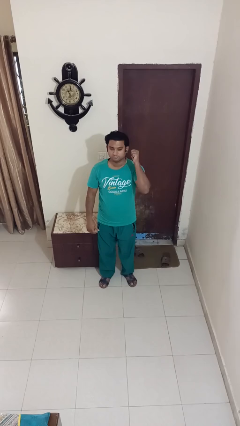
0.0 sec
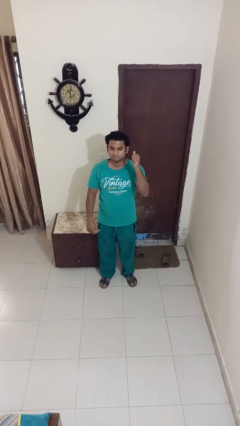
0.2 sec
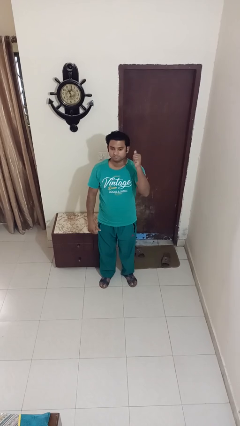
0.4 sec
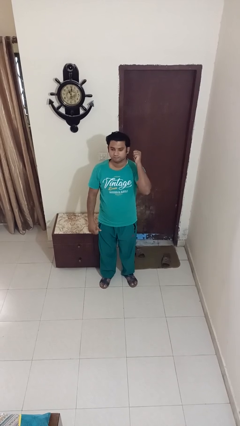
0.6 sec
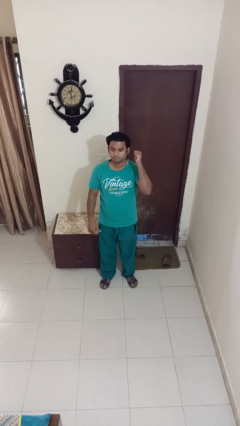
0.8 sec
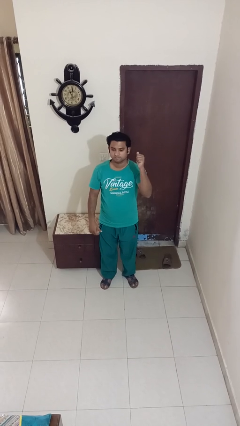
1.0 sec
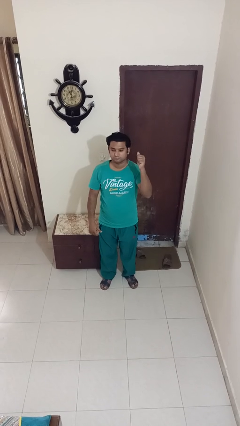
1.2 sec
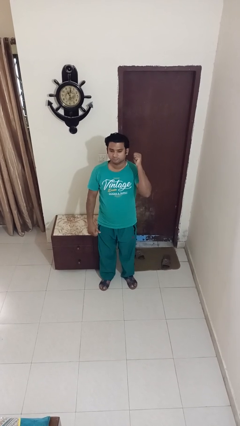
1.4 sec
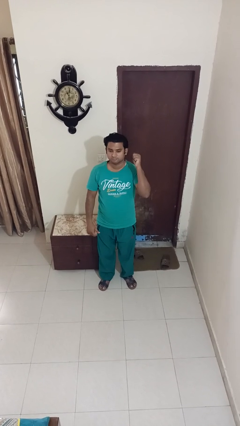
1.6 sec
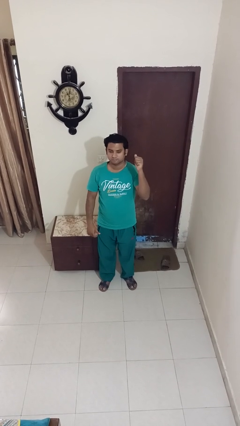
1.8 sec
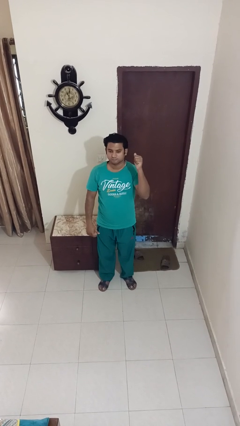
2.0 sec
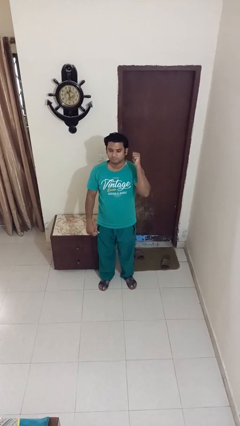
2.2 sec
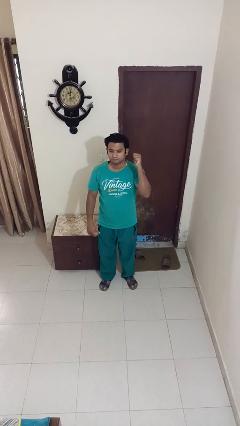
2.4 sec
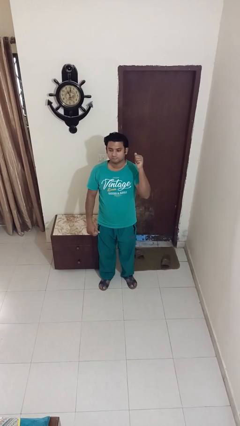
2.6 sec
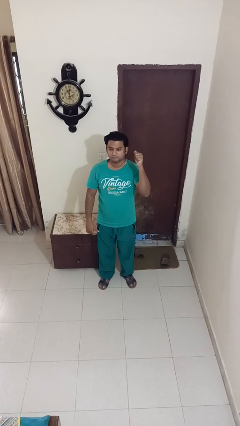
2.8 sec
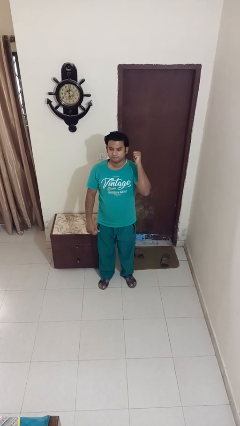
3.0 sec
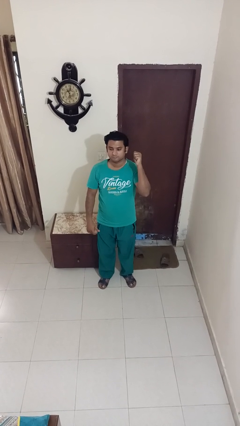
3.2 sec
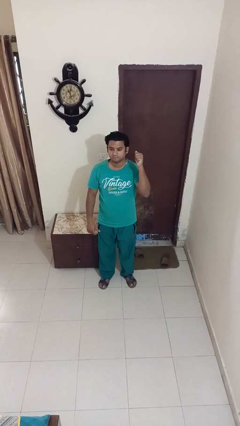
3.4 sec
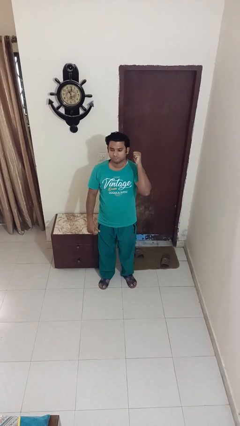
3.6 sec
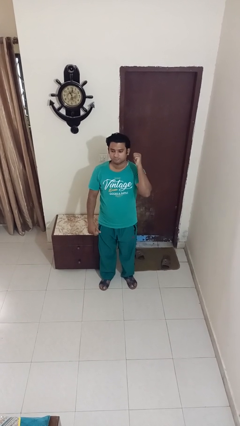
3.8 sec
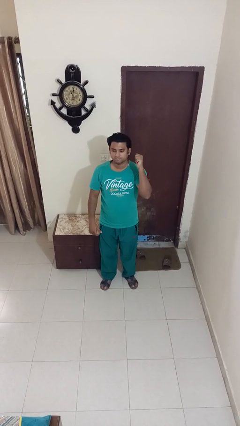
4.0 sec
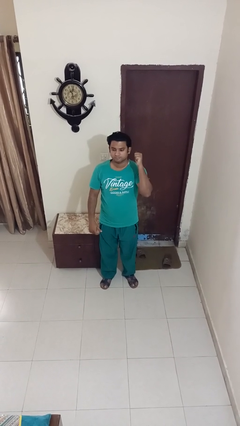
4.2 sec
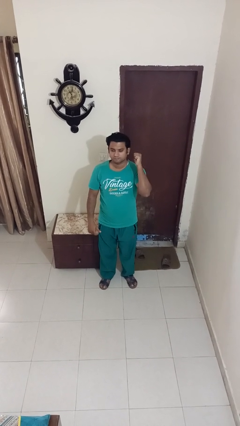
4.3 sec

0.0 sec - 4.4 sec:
person gestures behind me

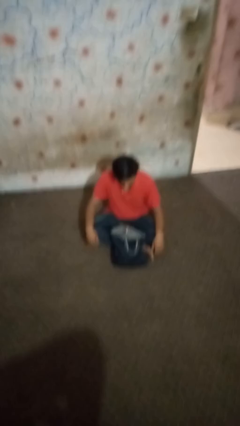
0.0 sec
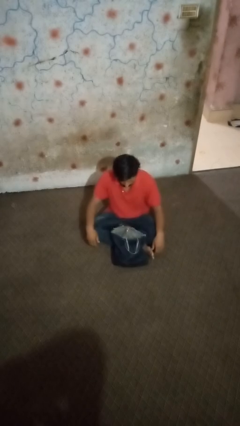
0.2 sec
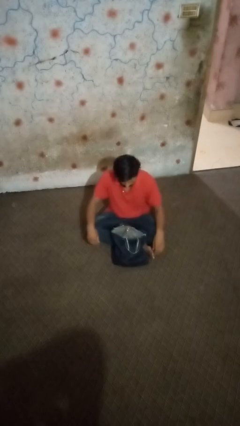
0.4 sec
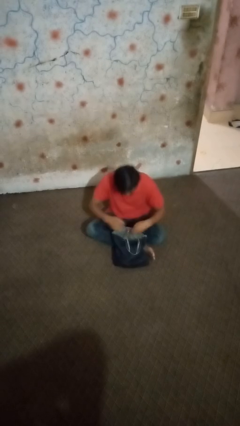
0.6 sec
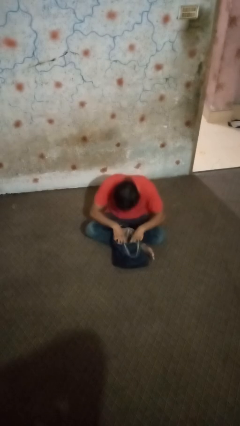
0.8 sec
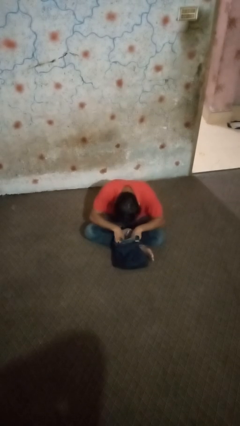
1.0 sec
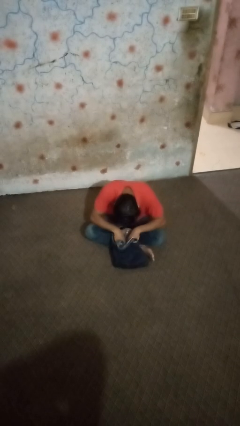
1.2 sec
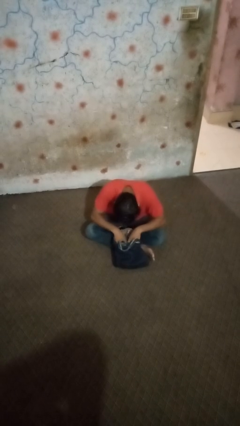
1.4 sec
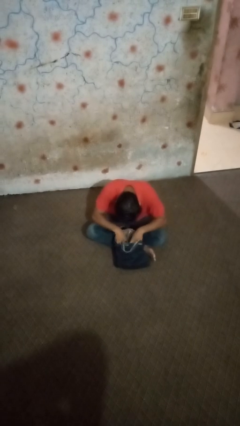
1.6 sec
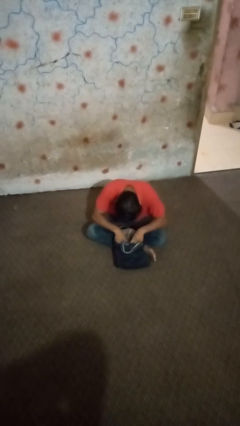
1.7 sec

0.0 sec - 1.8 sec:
person searches in bag

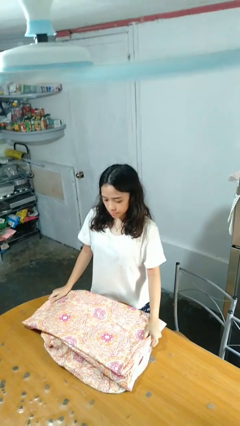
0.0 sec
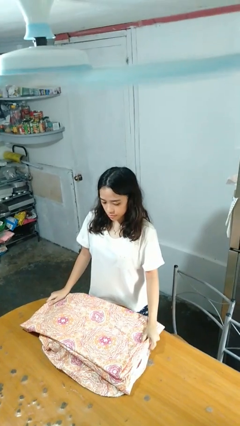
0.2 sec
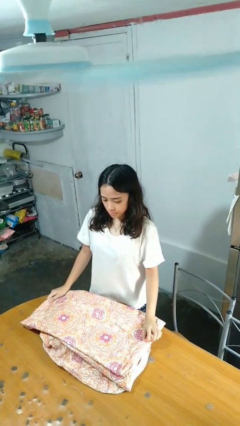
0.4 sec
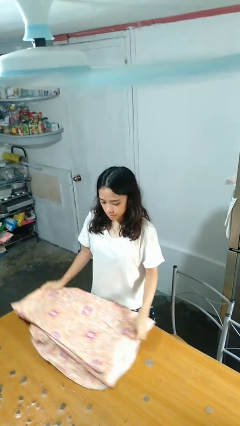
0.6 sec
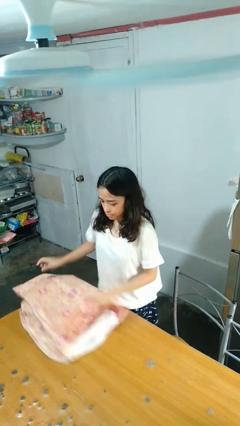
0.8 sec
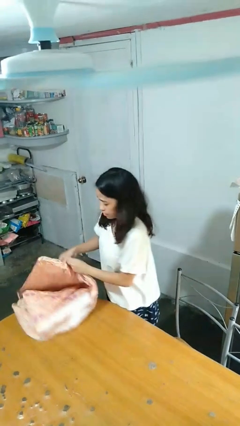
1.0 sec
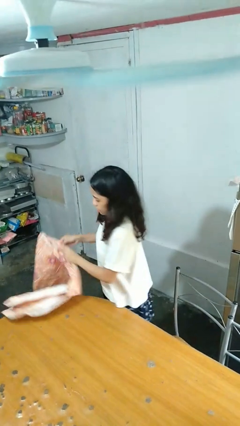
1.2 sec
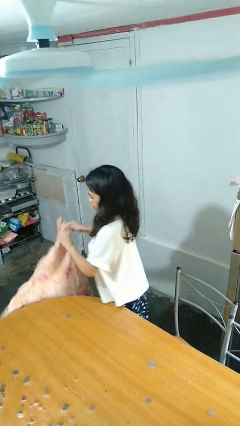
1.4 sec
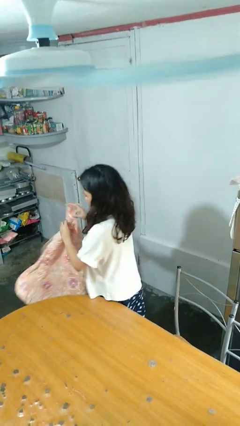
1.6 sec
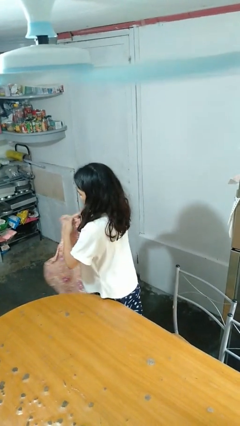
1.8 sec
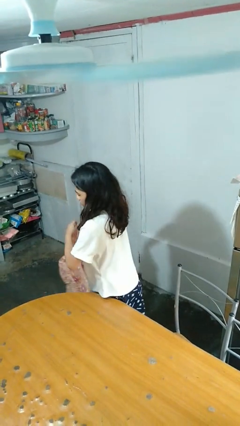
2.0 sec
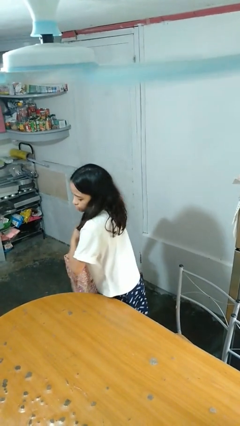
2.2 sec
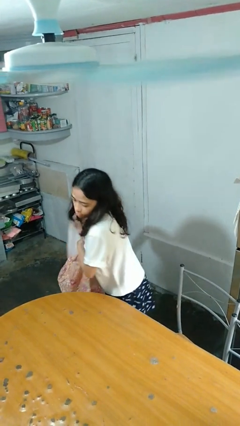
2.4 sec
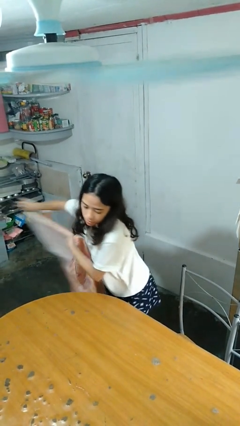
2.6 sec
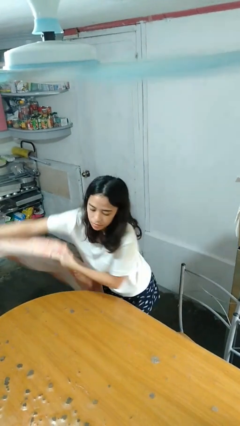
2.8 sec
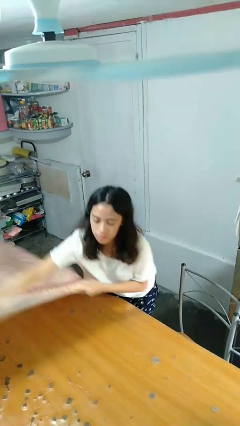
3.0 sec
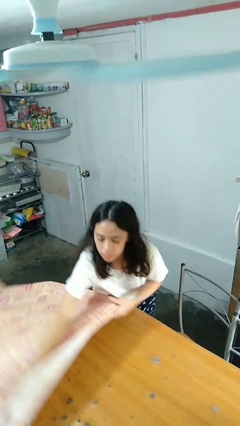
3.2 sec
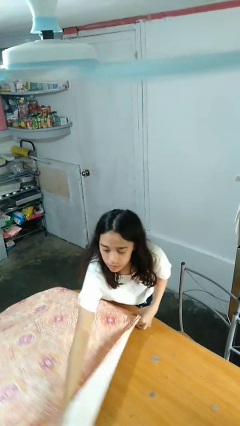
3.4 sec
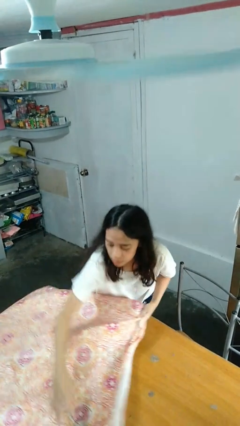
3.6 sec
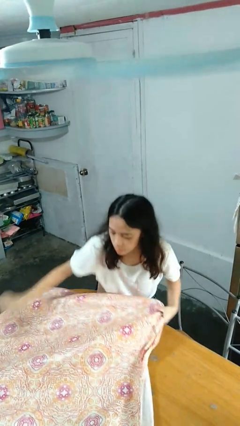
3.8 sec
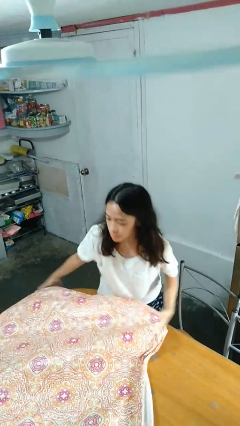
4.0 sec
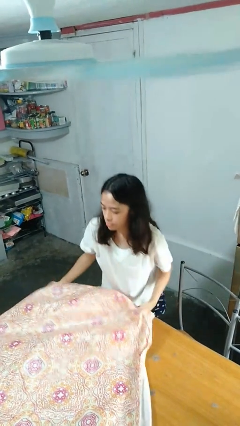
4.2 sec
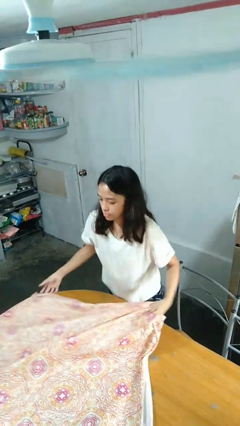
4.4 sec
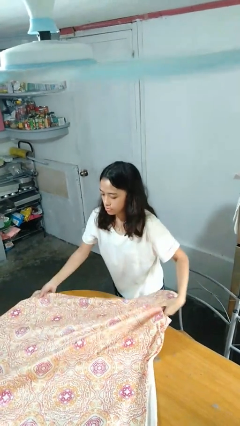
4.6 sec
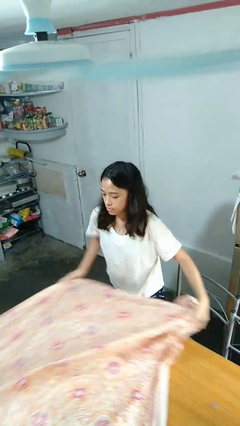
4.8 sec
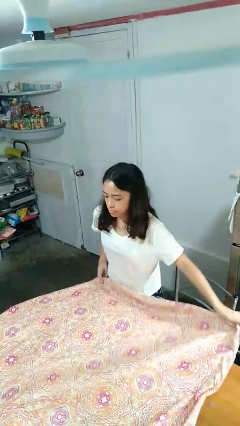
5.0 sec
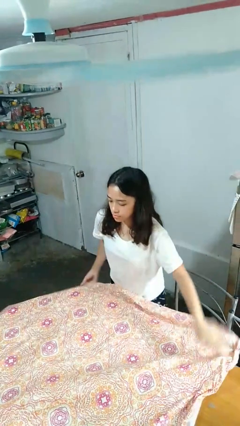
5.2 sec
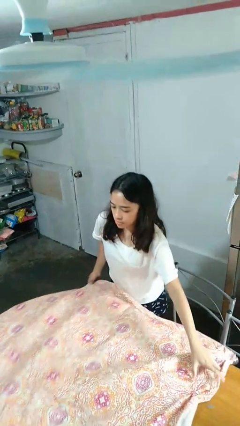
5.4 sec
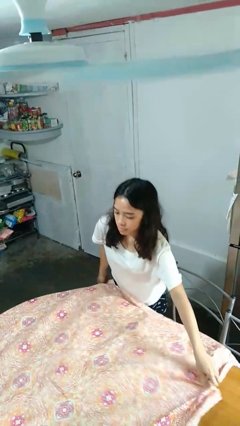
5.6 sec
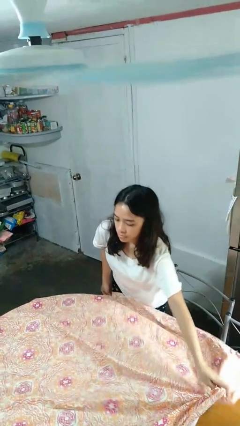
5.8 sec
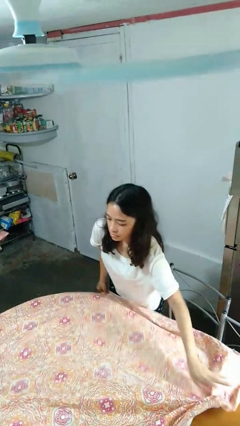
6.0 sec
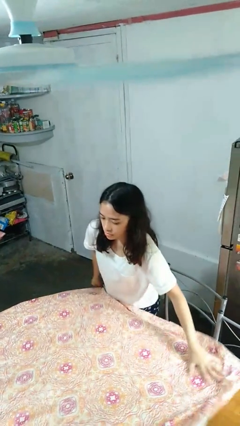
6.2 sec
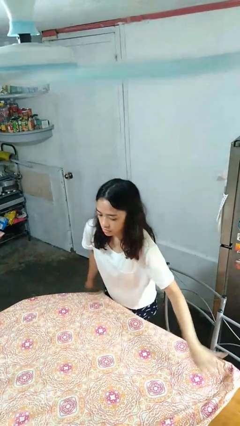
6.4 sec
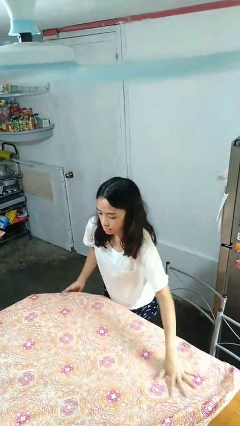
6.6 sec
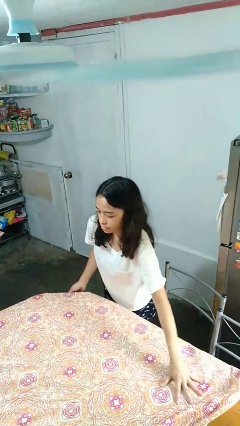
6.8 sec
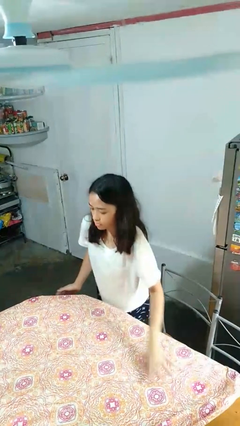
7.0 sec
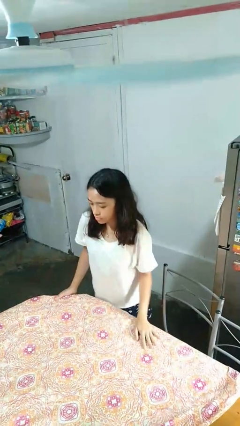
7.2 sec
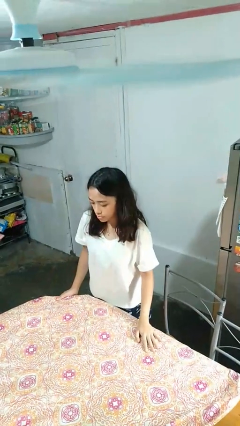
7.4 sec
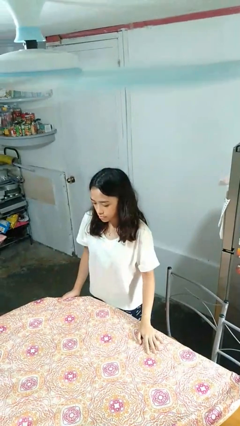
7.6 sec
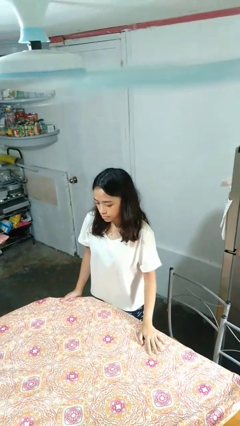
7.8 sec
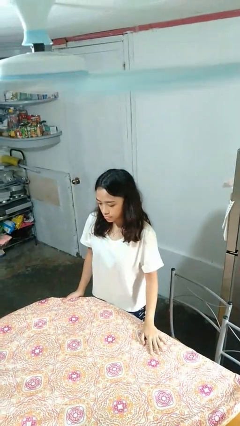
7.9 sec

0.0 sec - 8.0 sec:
person spreads tablecloth

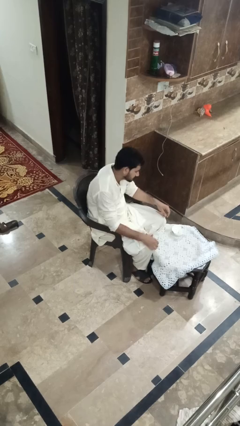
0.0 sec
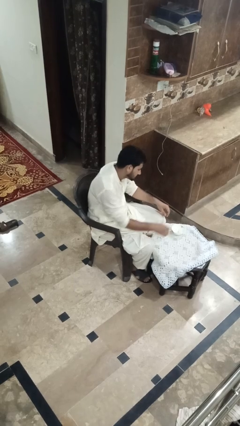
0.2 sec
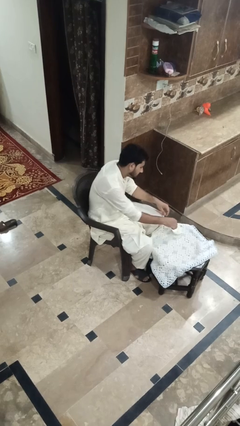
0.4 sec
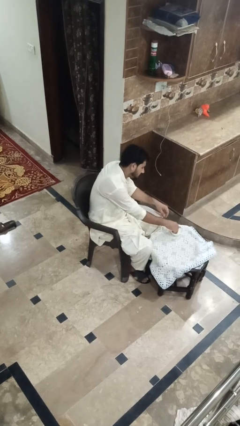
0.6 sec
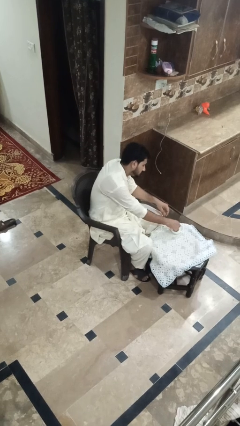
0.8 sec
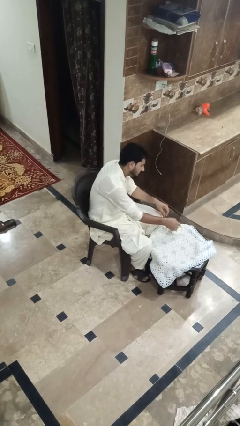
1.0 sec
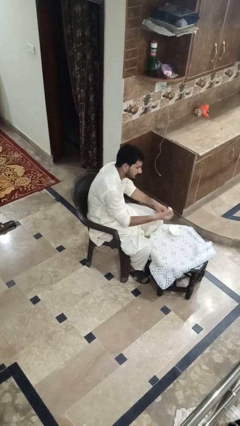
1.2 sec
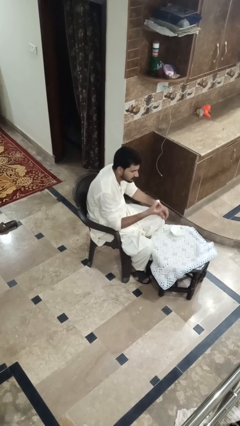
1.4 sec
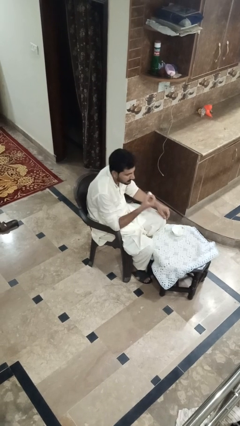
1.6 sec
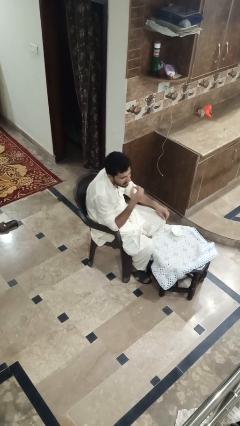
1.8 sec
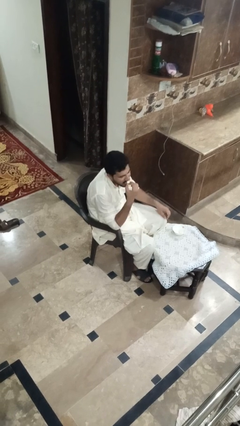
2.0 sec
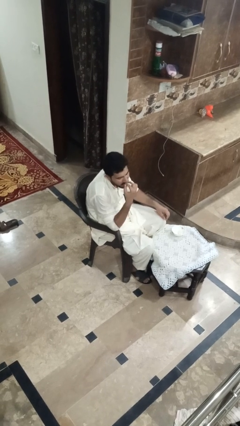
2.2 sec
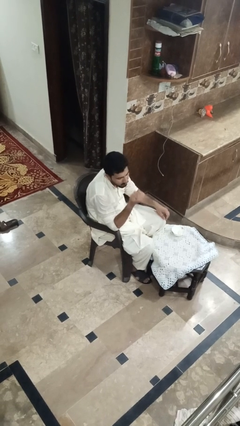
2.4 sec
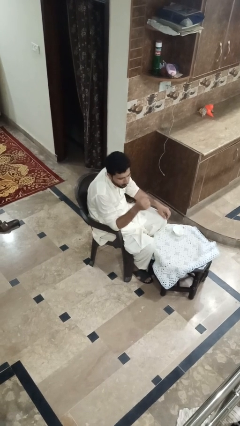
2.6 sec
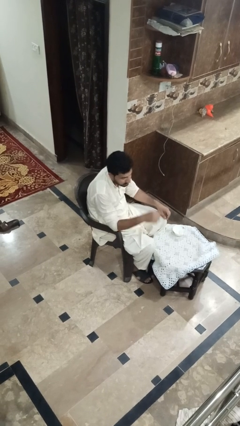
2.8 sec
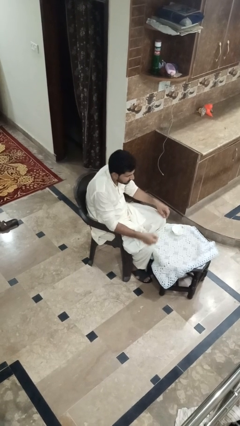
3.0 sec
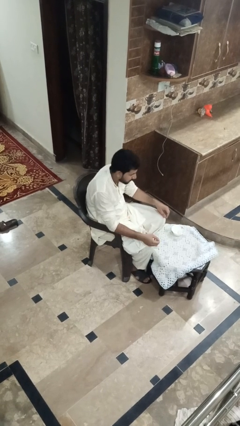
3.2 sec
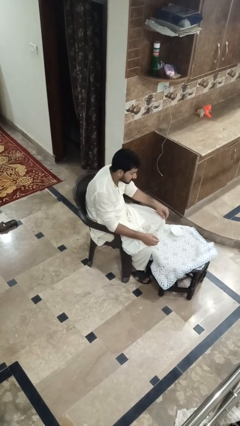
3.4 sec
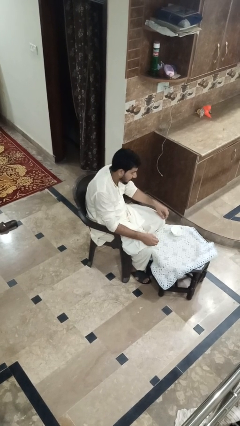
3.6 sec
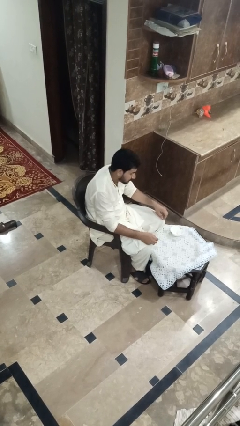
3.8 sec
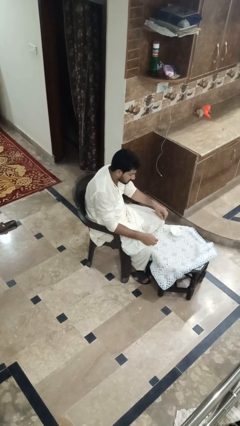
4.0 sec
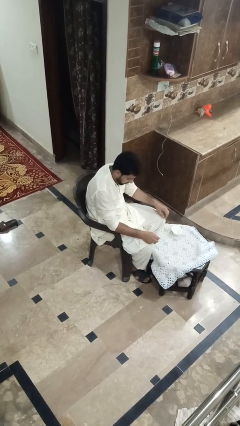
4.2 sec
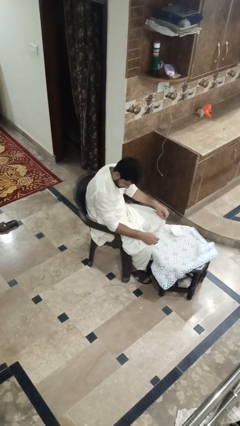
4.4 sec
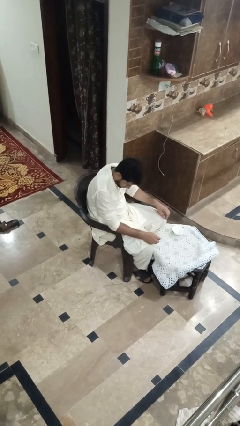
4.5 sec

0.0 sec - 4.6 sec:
person eats with hands
